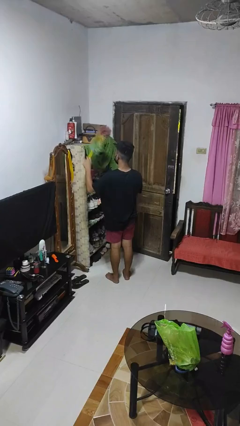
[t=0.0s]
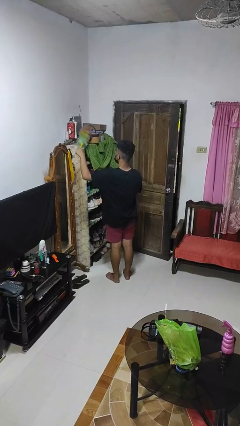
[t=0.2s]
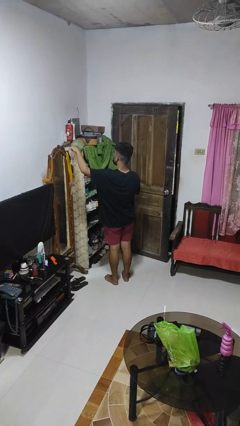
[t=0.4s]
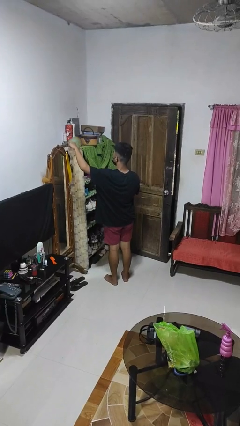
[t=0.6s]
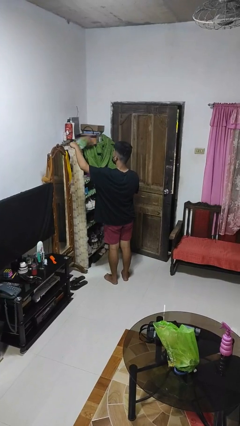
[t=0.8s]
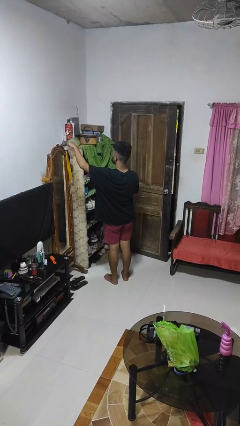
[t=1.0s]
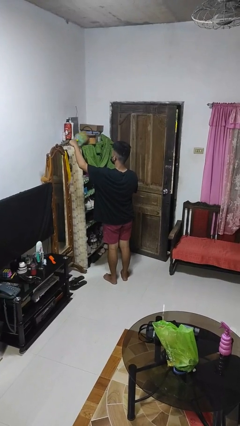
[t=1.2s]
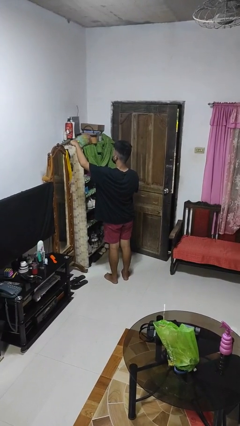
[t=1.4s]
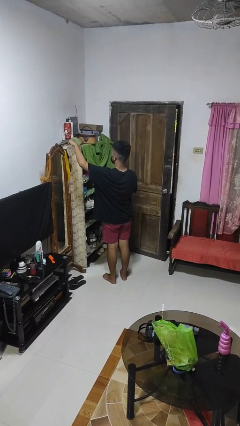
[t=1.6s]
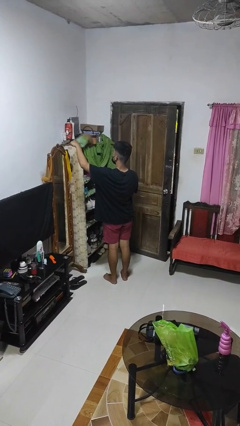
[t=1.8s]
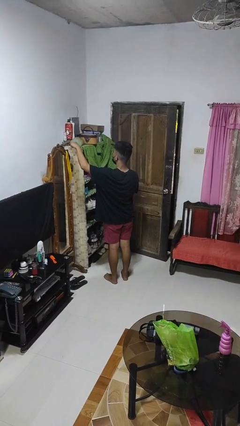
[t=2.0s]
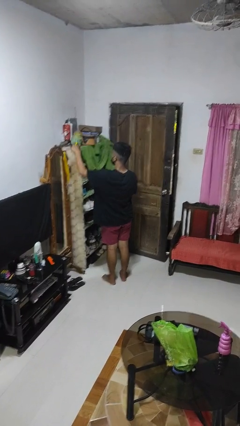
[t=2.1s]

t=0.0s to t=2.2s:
person dusts furniture

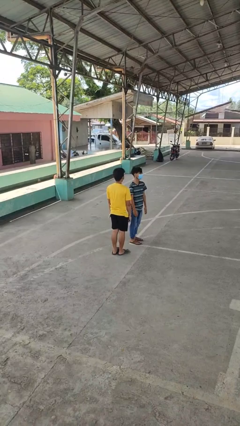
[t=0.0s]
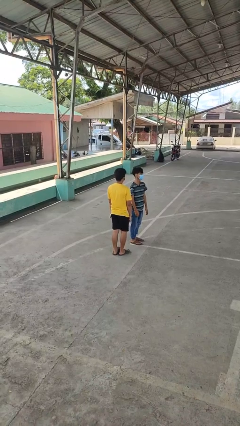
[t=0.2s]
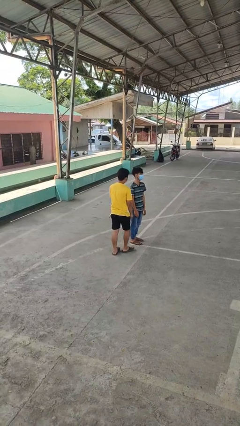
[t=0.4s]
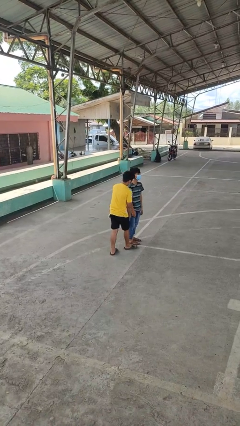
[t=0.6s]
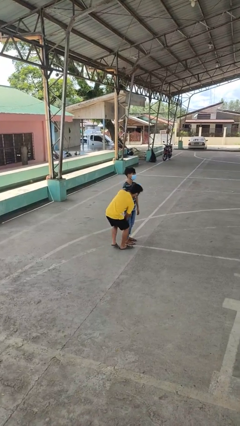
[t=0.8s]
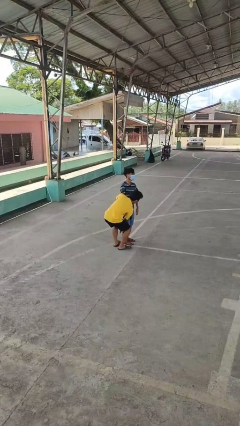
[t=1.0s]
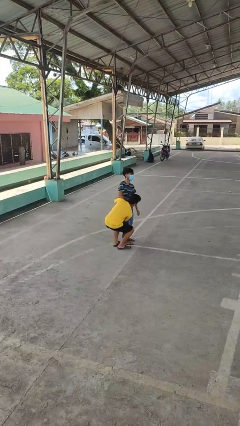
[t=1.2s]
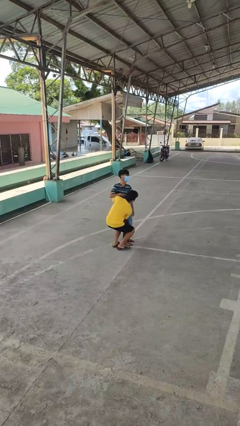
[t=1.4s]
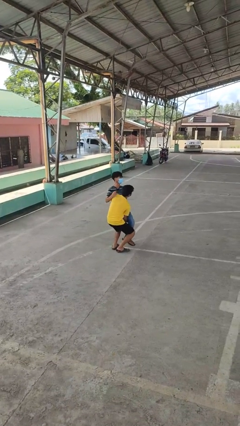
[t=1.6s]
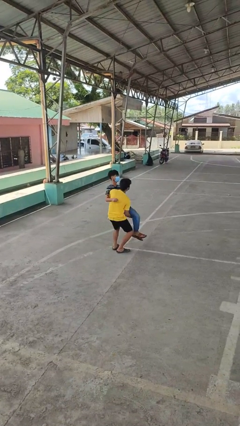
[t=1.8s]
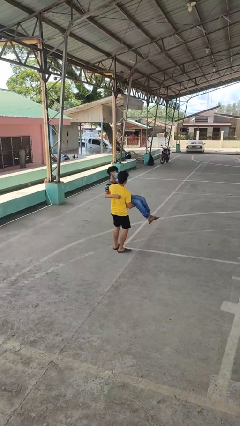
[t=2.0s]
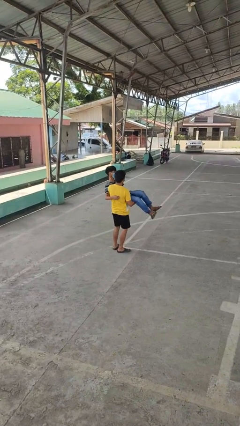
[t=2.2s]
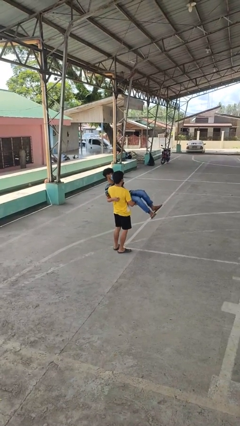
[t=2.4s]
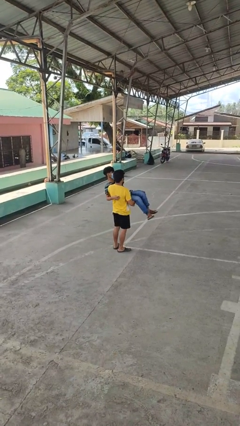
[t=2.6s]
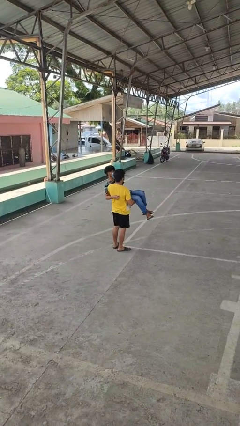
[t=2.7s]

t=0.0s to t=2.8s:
person picks up person

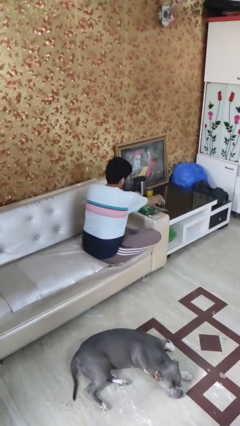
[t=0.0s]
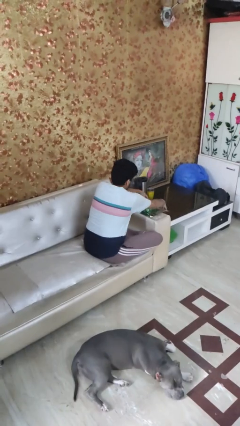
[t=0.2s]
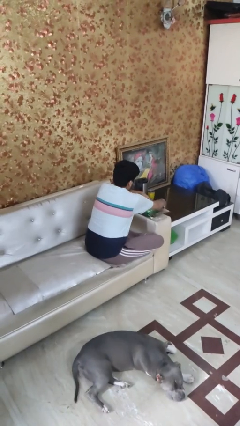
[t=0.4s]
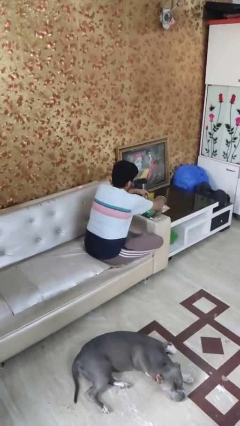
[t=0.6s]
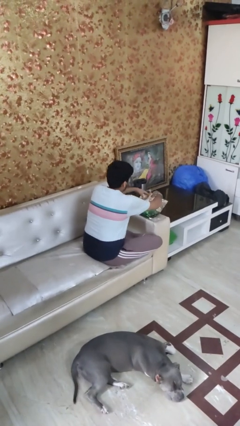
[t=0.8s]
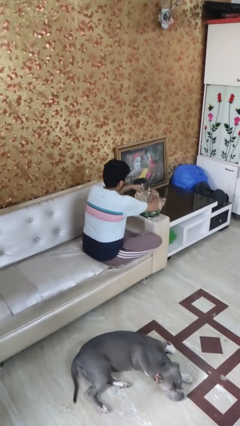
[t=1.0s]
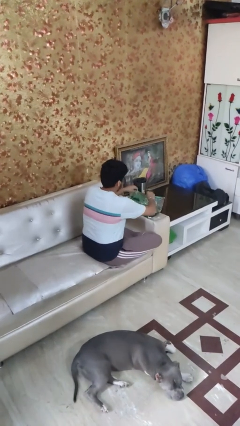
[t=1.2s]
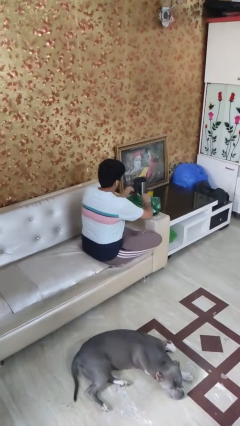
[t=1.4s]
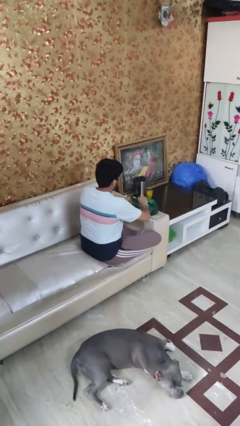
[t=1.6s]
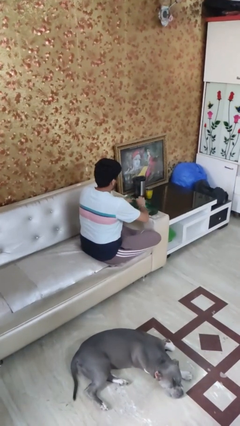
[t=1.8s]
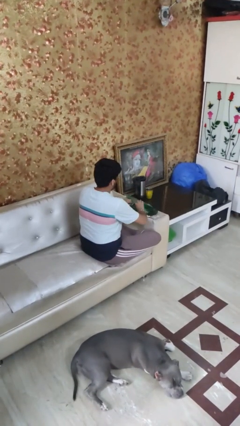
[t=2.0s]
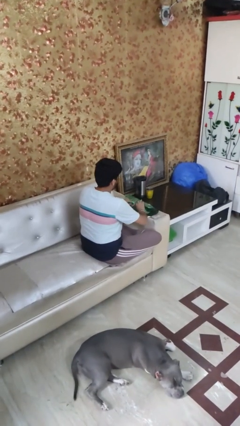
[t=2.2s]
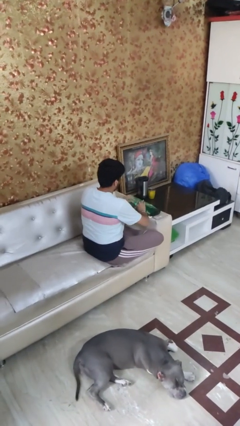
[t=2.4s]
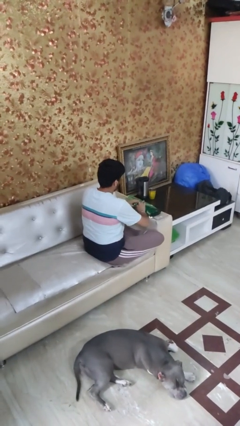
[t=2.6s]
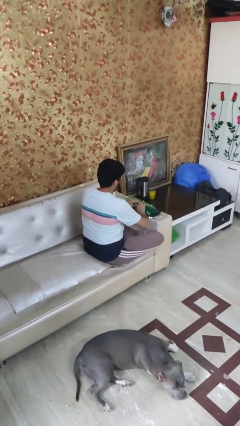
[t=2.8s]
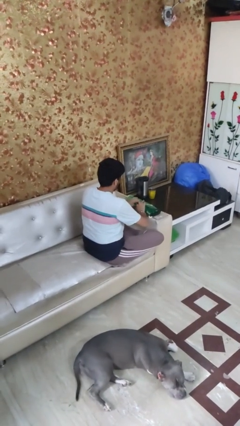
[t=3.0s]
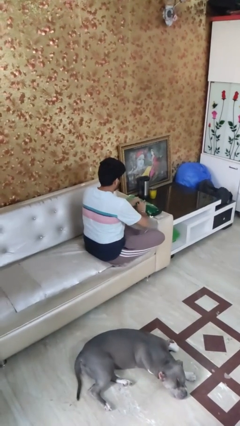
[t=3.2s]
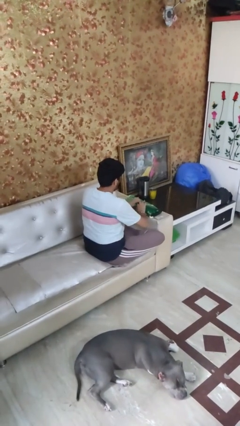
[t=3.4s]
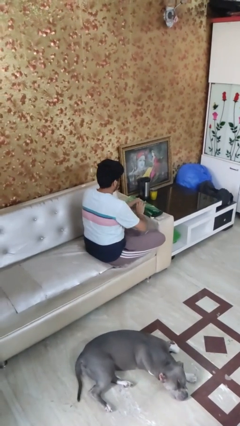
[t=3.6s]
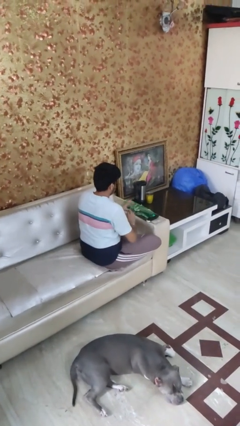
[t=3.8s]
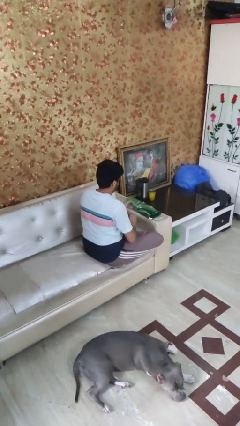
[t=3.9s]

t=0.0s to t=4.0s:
person wraps box

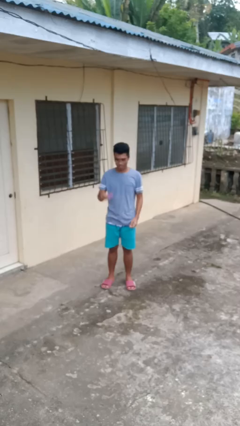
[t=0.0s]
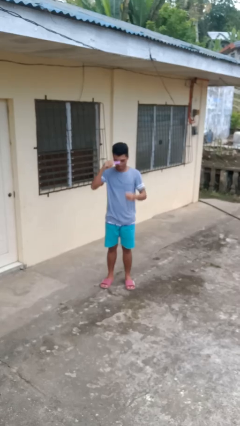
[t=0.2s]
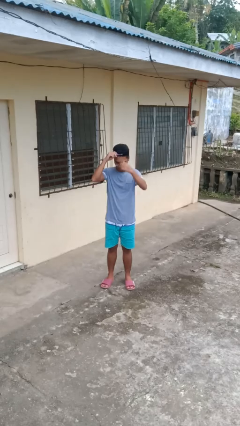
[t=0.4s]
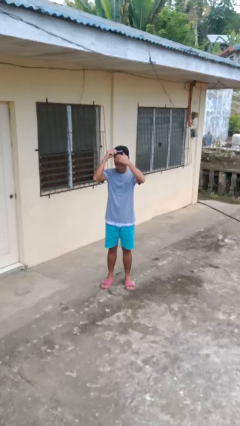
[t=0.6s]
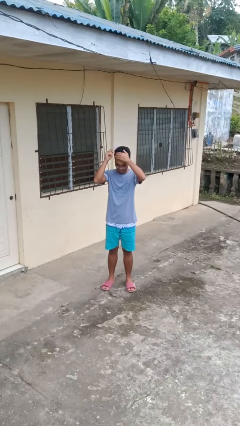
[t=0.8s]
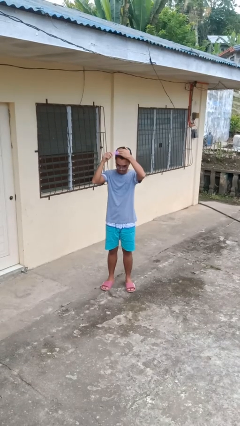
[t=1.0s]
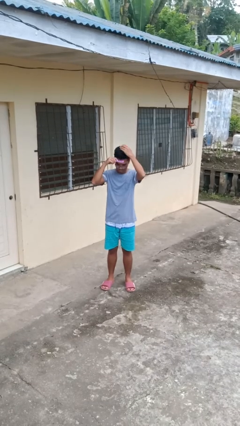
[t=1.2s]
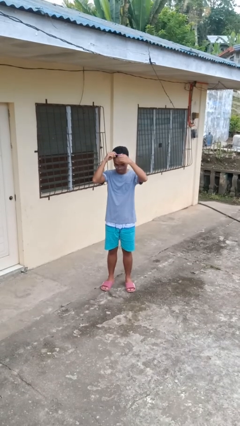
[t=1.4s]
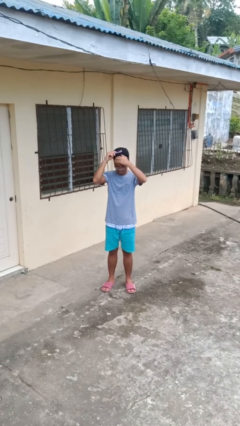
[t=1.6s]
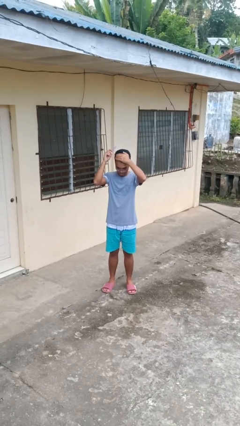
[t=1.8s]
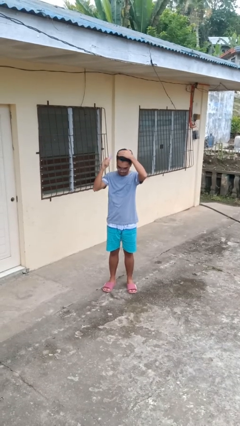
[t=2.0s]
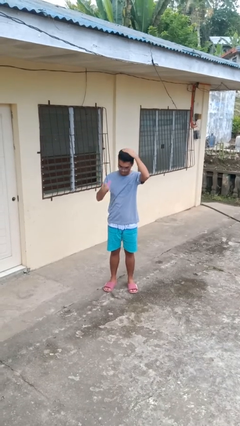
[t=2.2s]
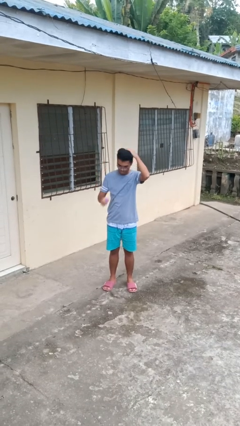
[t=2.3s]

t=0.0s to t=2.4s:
person brushes hair

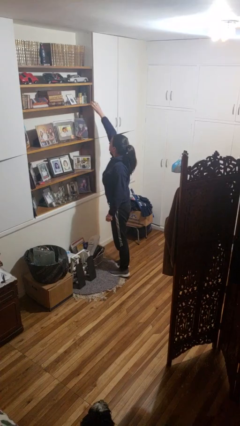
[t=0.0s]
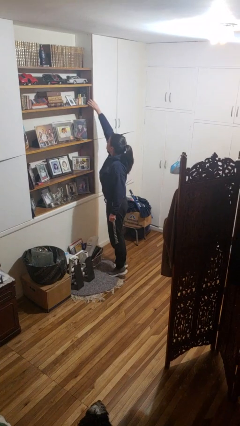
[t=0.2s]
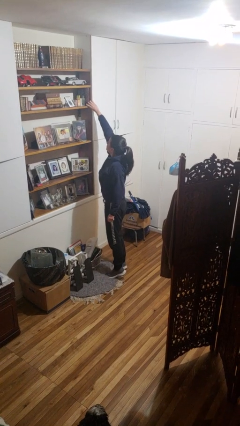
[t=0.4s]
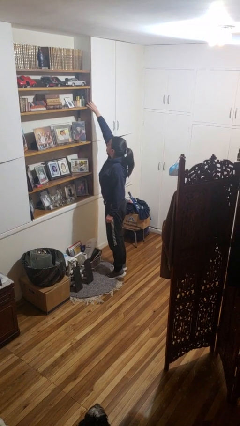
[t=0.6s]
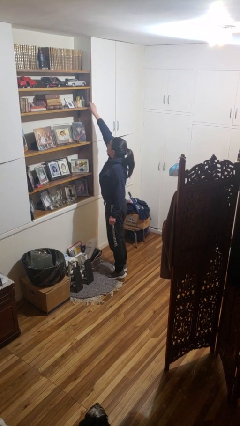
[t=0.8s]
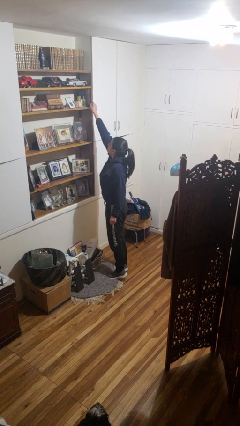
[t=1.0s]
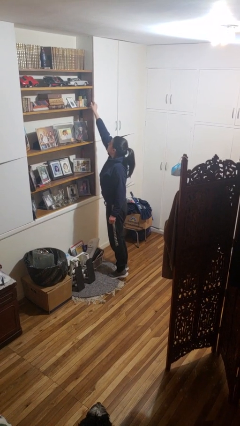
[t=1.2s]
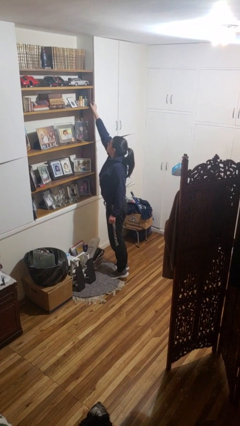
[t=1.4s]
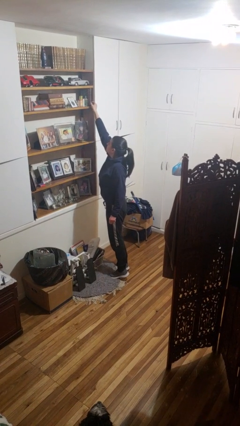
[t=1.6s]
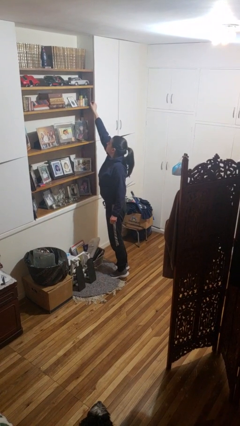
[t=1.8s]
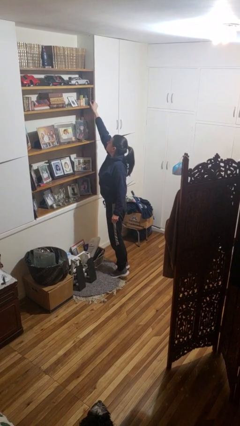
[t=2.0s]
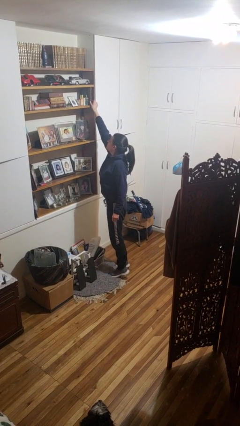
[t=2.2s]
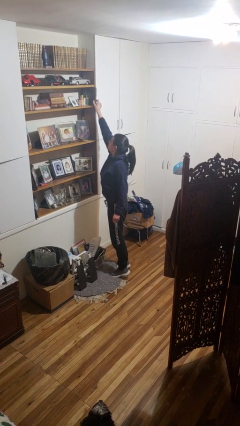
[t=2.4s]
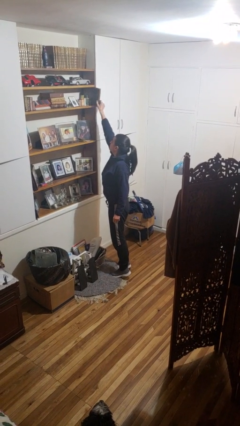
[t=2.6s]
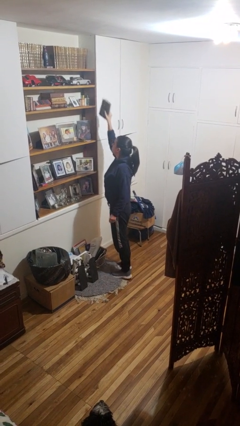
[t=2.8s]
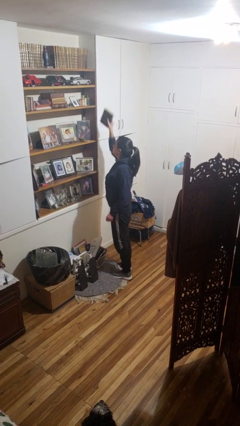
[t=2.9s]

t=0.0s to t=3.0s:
person picks up object from shelf

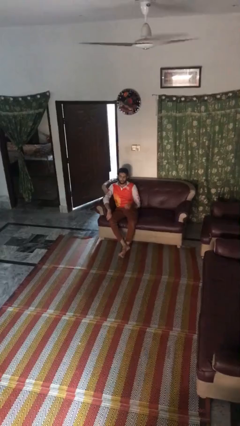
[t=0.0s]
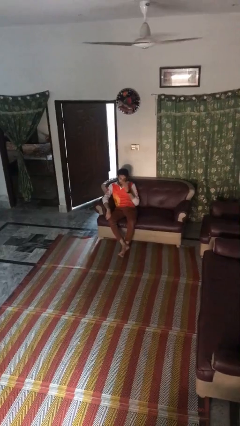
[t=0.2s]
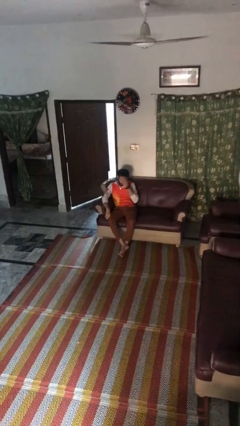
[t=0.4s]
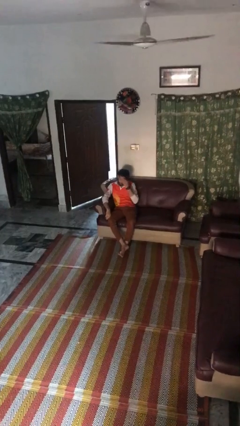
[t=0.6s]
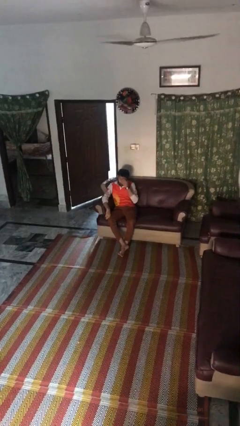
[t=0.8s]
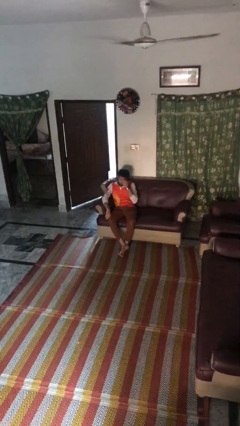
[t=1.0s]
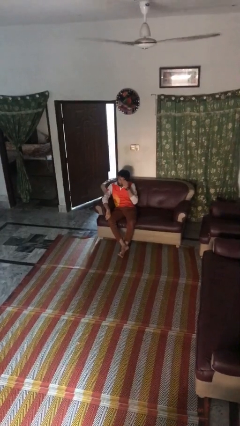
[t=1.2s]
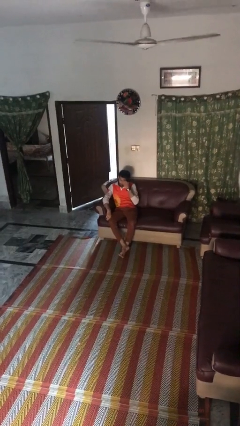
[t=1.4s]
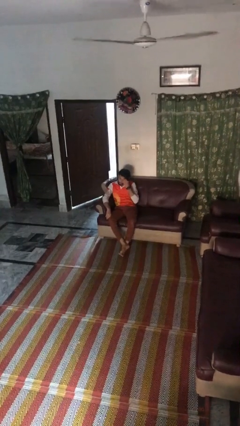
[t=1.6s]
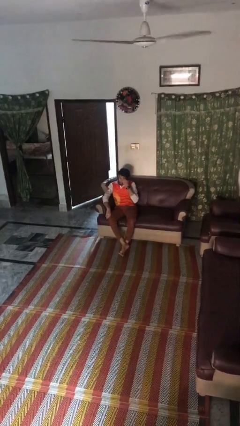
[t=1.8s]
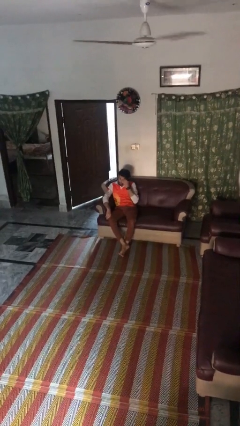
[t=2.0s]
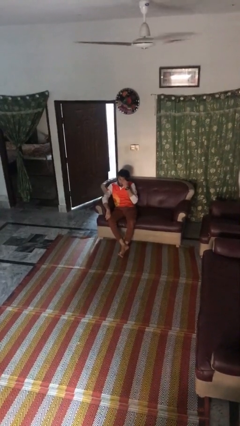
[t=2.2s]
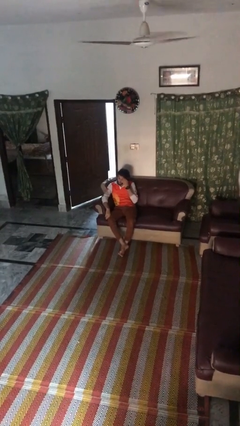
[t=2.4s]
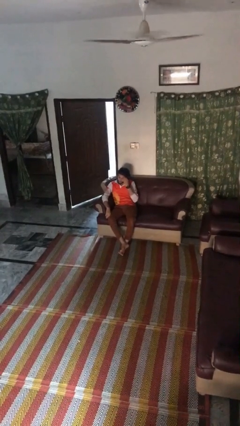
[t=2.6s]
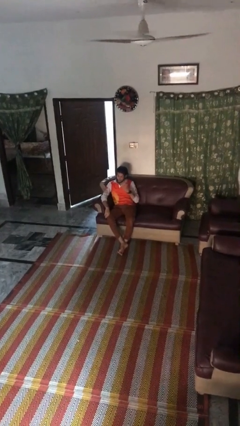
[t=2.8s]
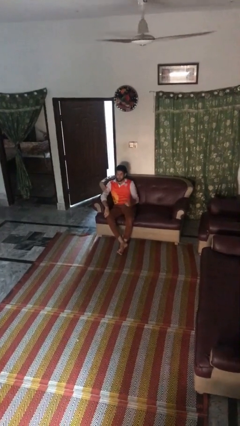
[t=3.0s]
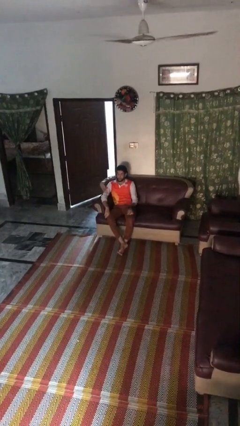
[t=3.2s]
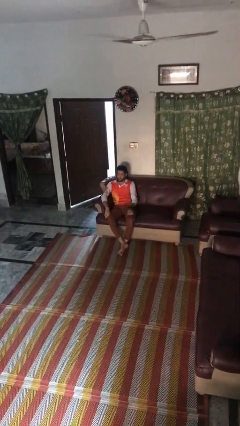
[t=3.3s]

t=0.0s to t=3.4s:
person scratches face
